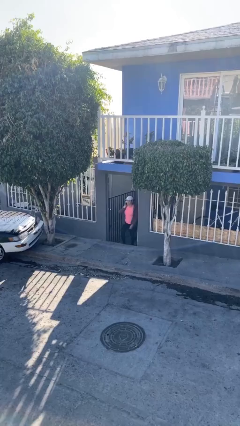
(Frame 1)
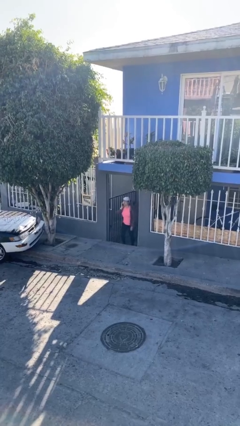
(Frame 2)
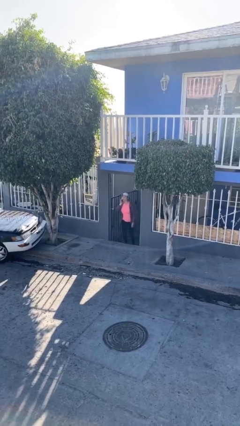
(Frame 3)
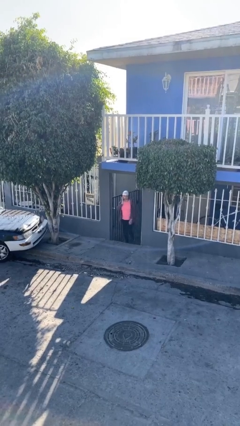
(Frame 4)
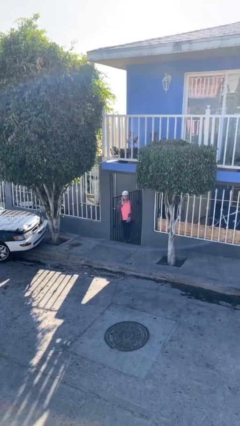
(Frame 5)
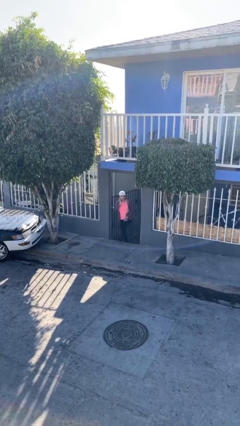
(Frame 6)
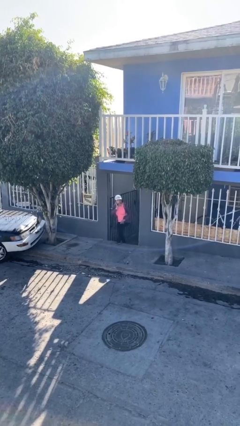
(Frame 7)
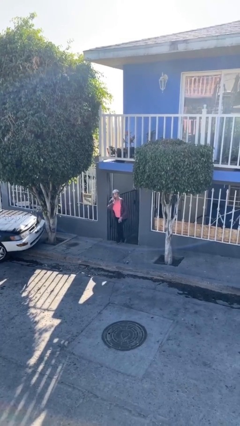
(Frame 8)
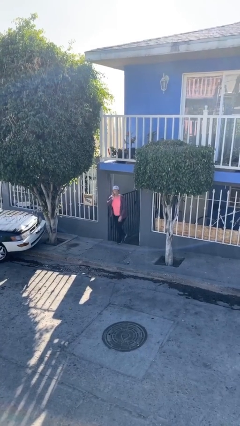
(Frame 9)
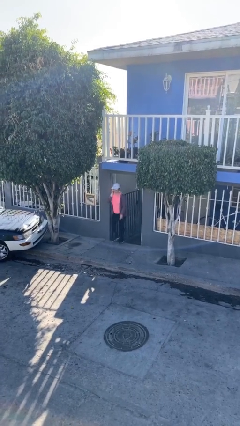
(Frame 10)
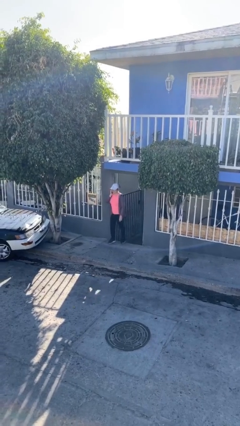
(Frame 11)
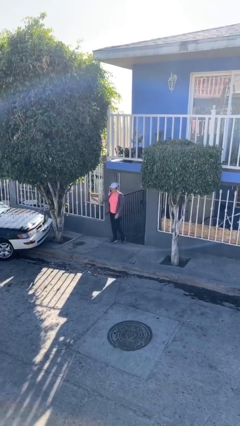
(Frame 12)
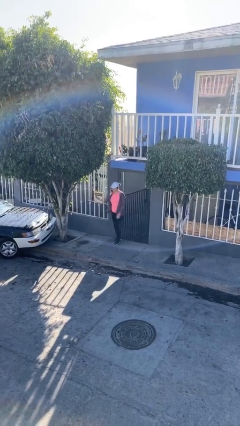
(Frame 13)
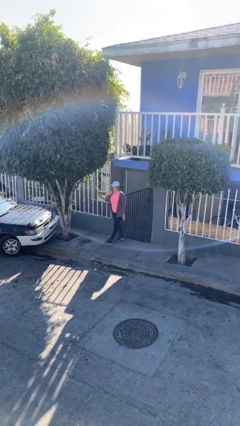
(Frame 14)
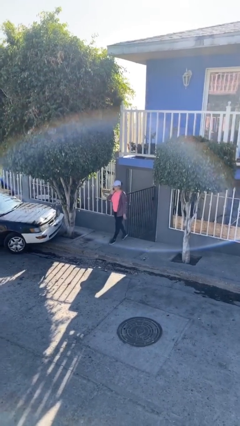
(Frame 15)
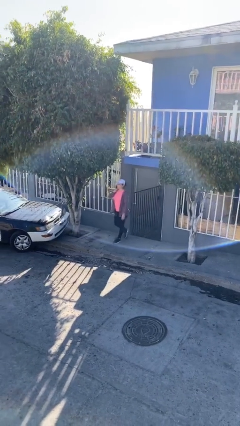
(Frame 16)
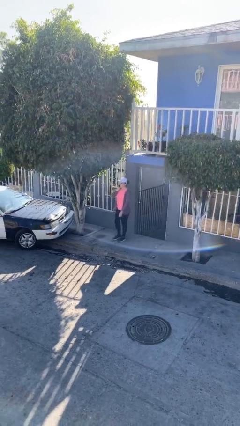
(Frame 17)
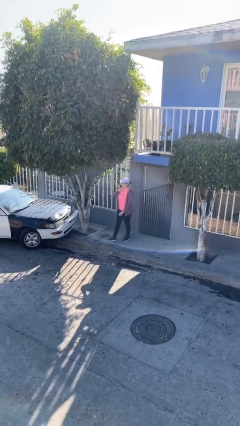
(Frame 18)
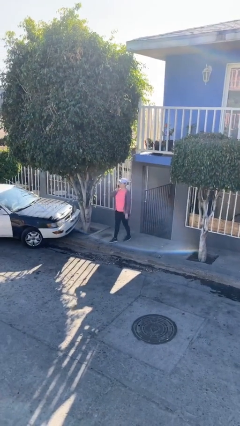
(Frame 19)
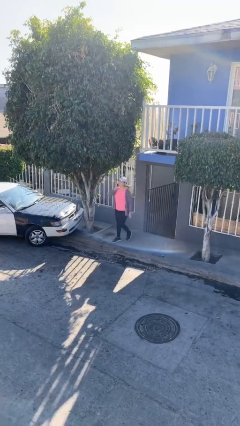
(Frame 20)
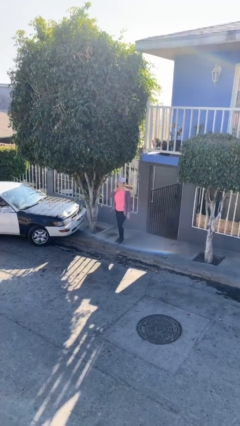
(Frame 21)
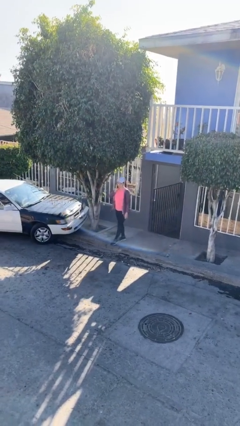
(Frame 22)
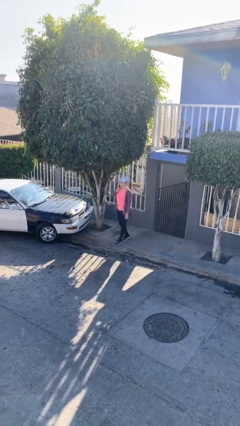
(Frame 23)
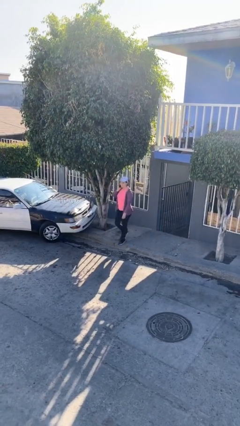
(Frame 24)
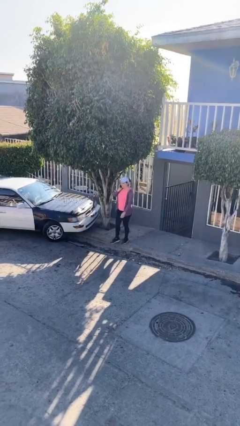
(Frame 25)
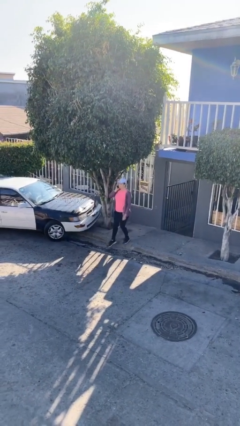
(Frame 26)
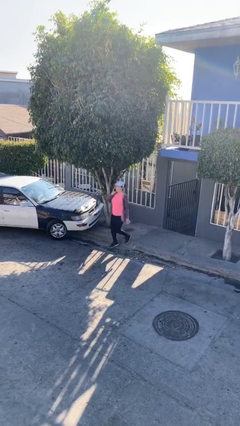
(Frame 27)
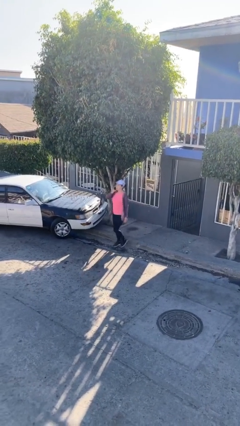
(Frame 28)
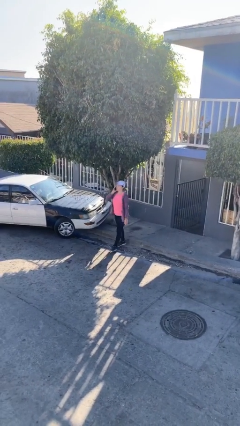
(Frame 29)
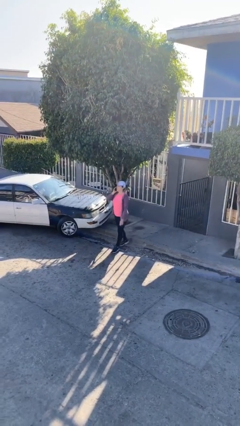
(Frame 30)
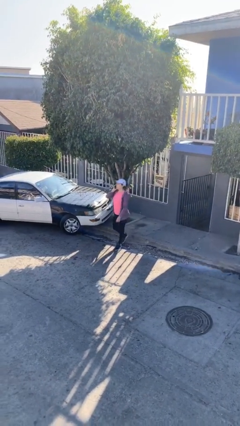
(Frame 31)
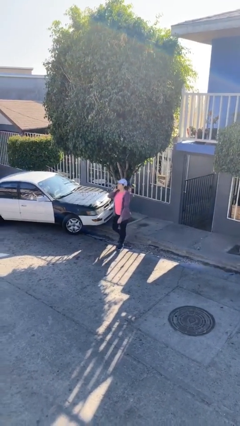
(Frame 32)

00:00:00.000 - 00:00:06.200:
person enters scene through structure

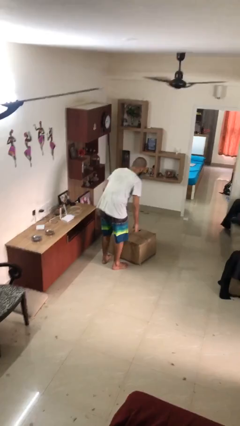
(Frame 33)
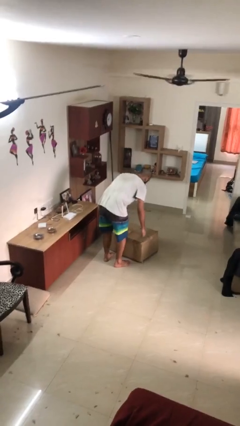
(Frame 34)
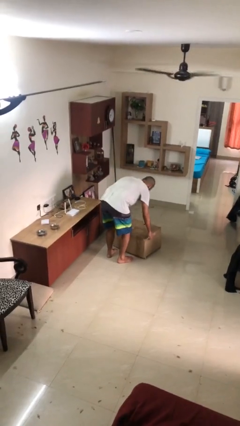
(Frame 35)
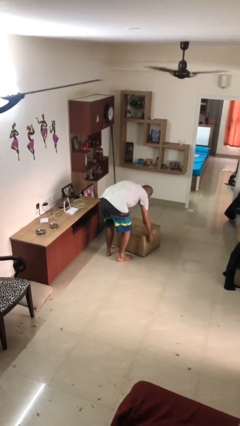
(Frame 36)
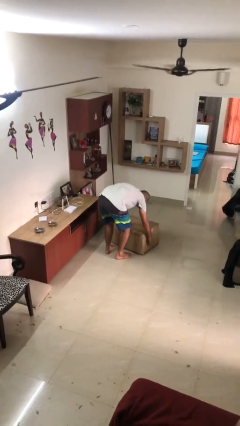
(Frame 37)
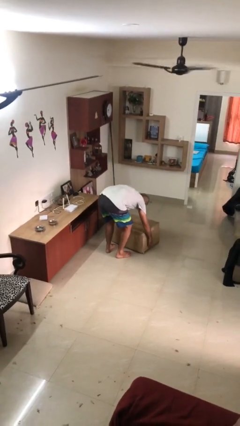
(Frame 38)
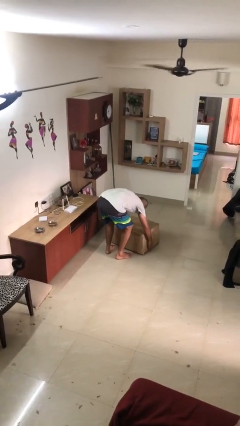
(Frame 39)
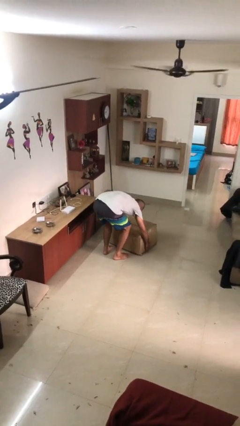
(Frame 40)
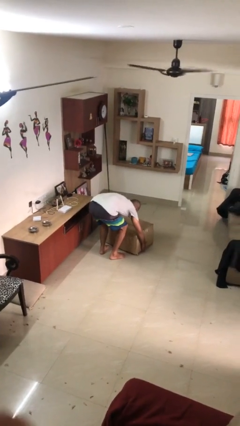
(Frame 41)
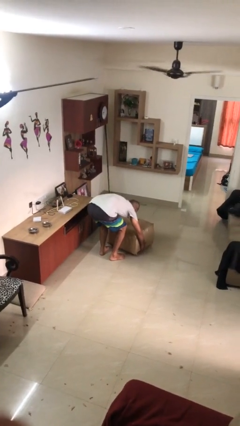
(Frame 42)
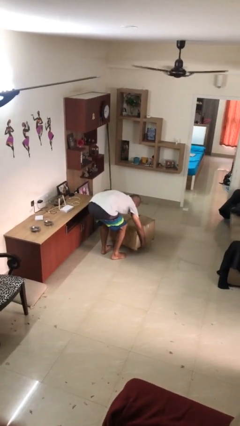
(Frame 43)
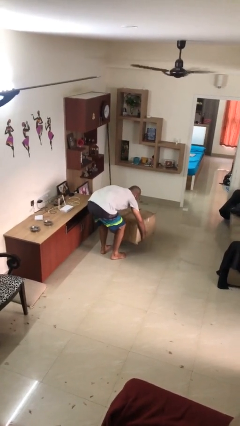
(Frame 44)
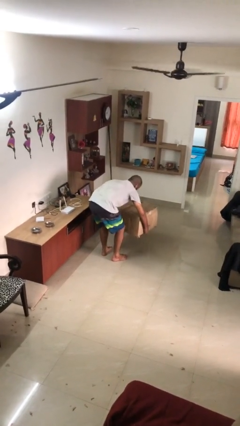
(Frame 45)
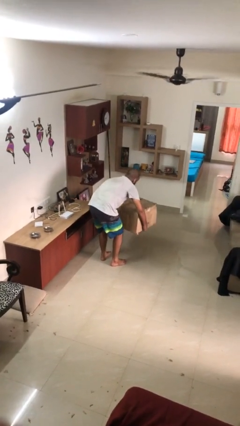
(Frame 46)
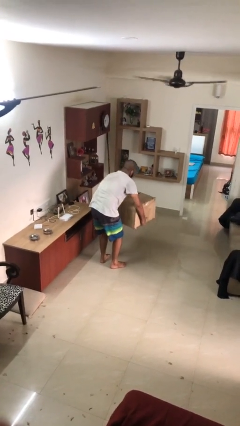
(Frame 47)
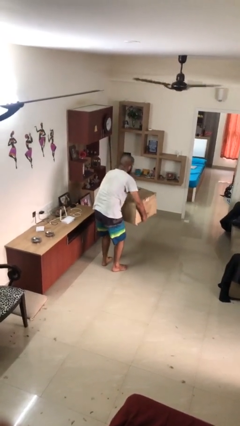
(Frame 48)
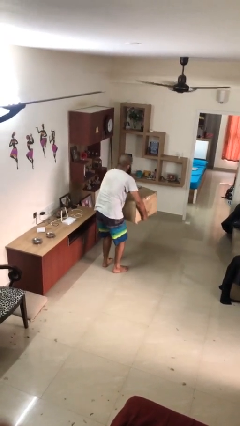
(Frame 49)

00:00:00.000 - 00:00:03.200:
person picks up object from floor

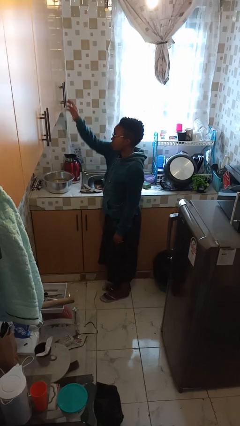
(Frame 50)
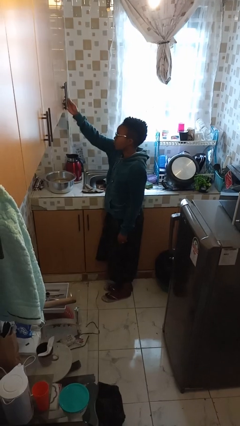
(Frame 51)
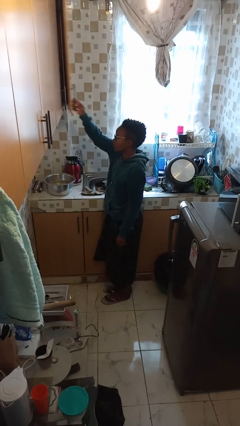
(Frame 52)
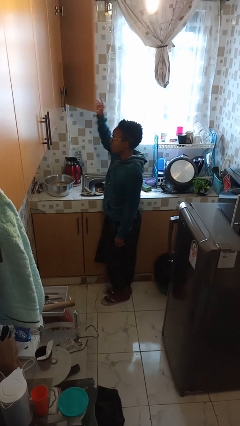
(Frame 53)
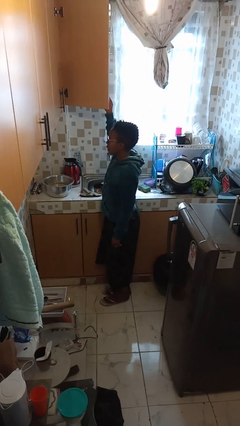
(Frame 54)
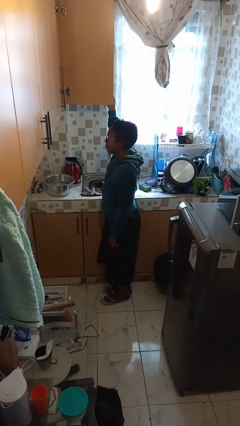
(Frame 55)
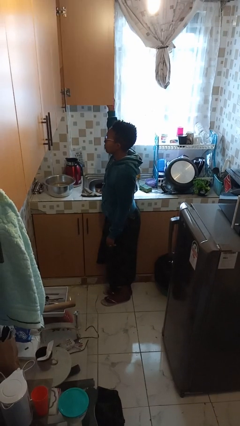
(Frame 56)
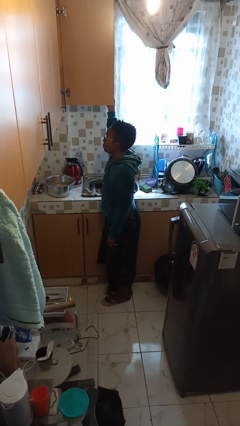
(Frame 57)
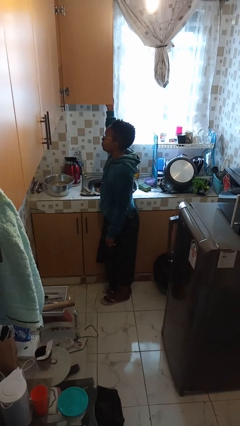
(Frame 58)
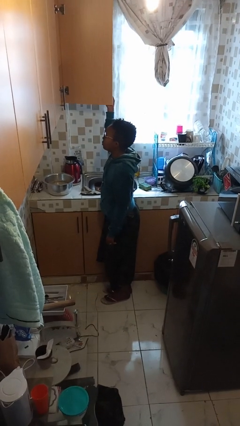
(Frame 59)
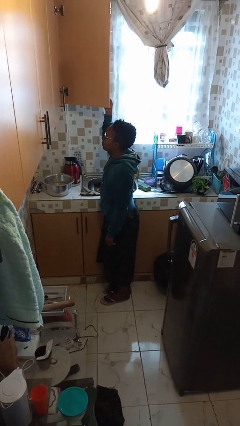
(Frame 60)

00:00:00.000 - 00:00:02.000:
person opens cabinet

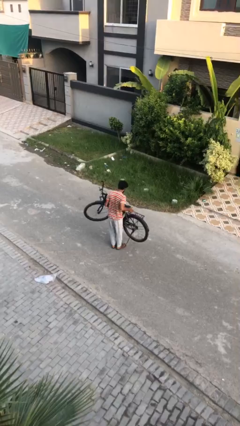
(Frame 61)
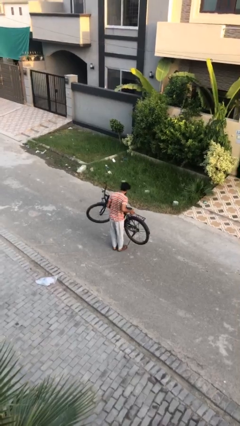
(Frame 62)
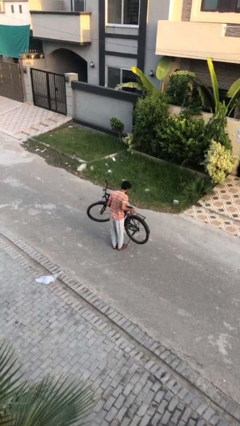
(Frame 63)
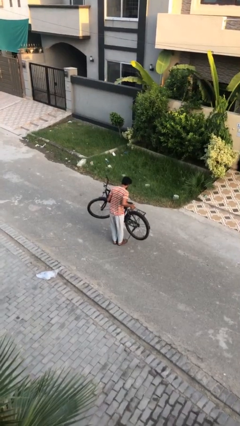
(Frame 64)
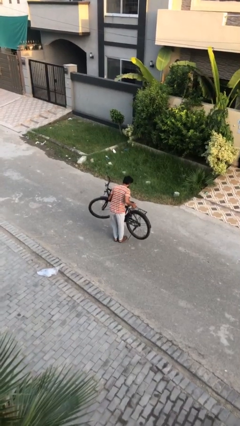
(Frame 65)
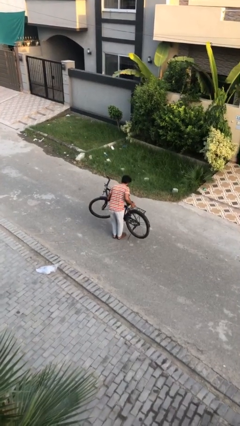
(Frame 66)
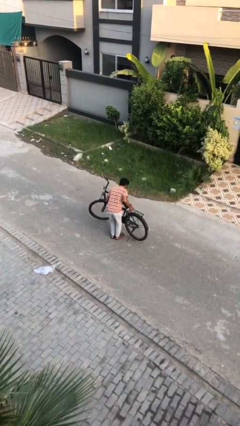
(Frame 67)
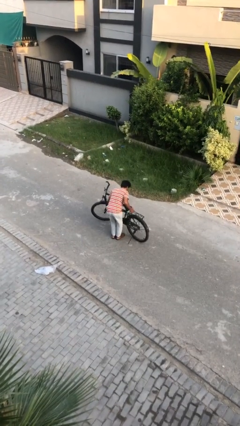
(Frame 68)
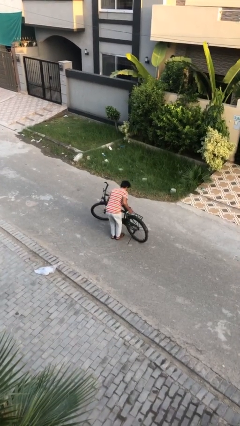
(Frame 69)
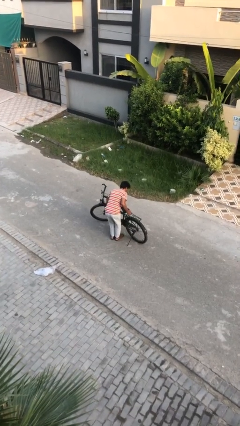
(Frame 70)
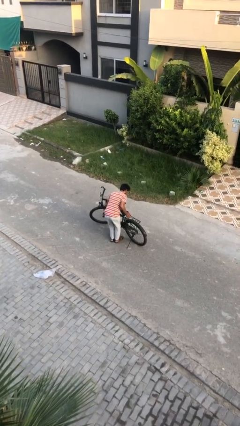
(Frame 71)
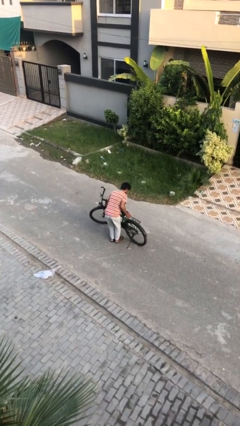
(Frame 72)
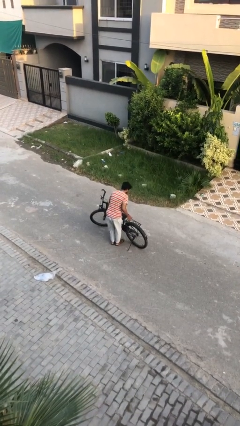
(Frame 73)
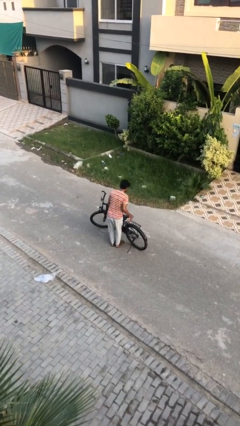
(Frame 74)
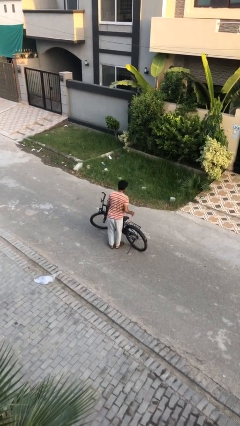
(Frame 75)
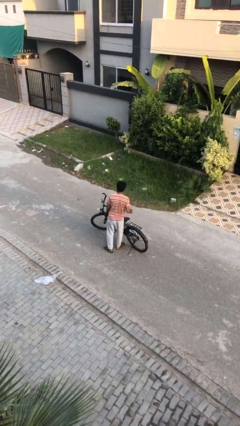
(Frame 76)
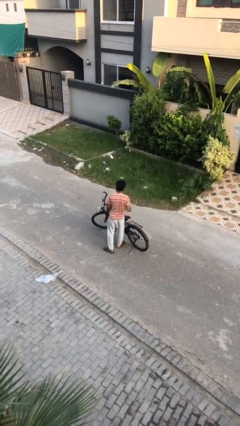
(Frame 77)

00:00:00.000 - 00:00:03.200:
person puts down object on floor

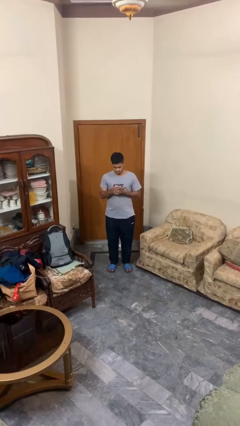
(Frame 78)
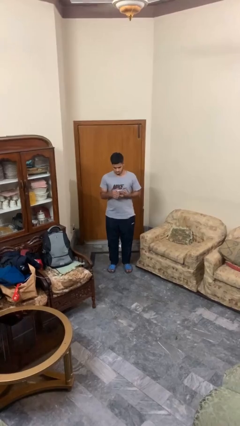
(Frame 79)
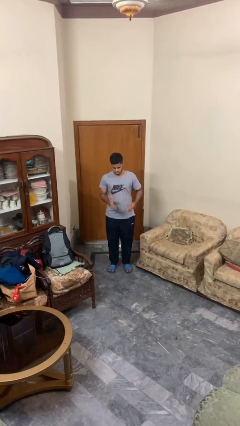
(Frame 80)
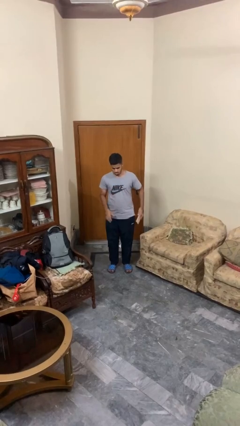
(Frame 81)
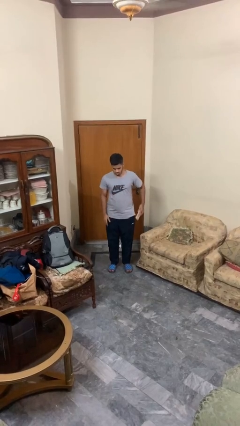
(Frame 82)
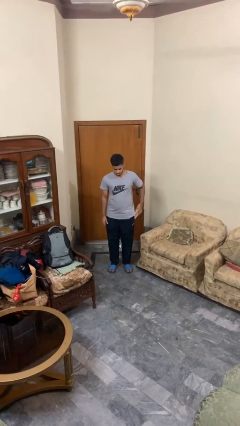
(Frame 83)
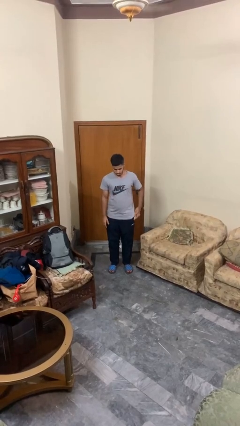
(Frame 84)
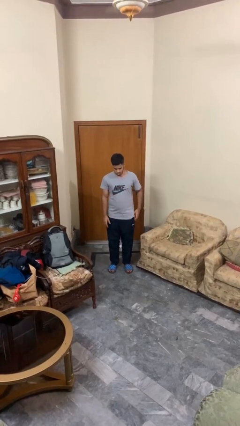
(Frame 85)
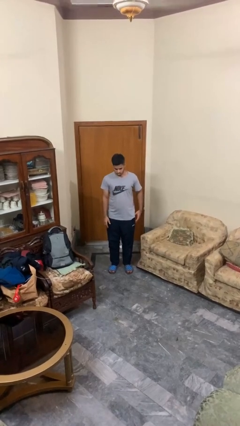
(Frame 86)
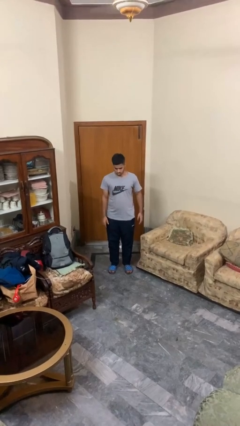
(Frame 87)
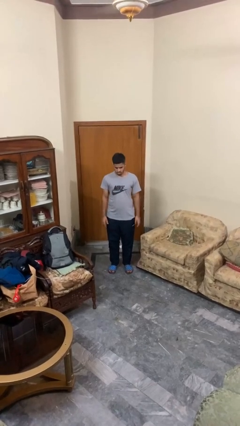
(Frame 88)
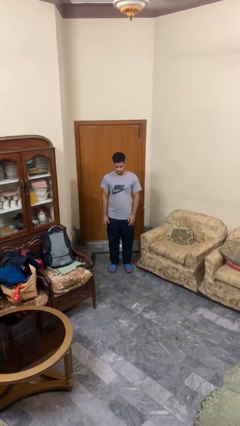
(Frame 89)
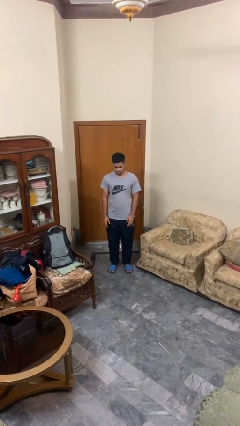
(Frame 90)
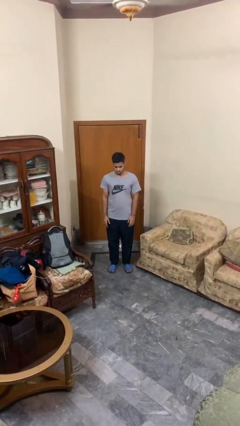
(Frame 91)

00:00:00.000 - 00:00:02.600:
person puts phone into pocket
